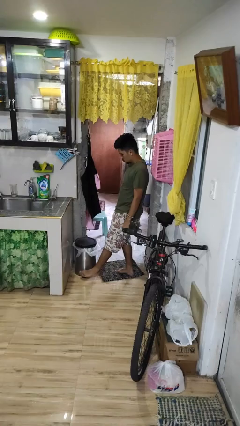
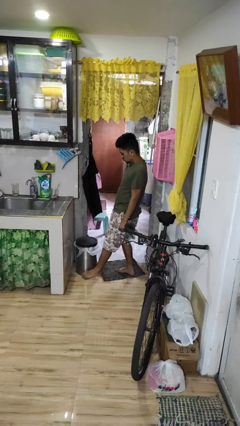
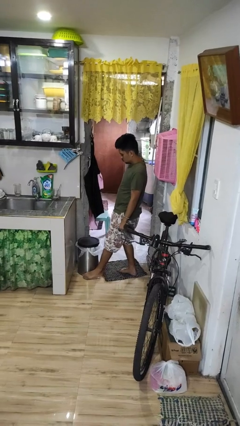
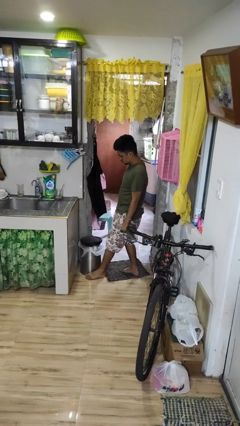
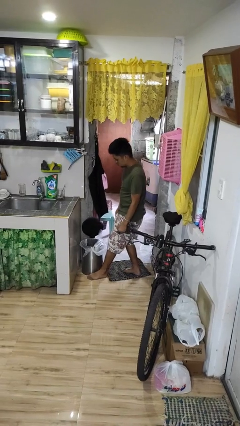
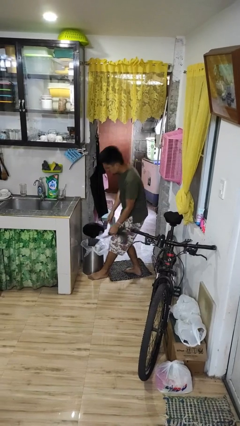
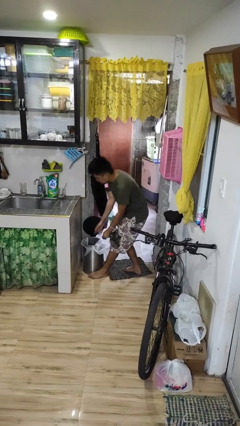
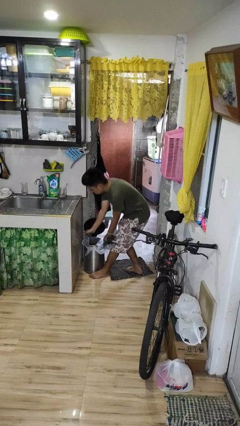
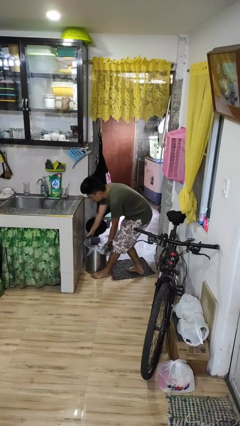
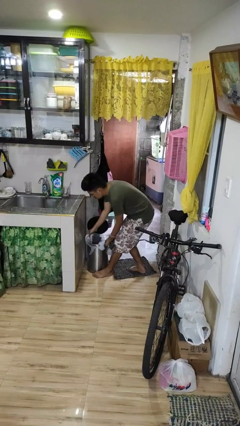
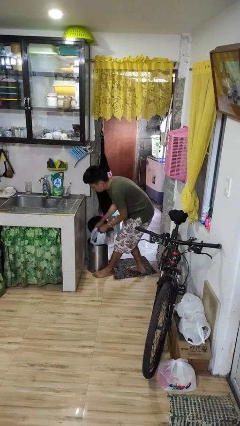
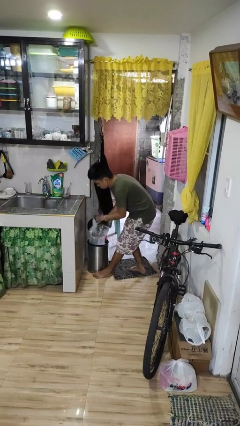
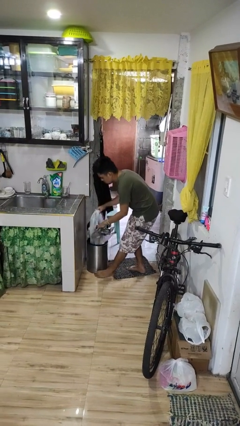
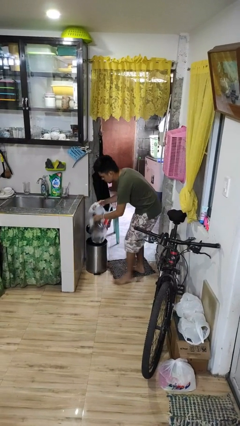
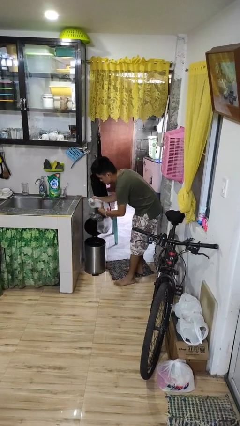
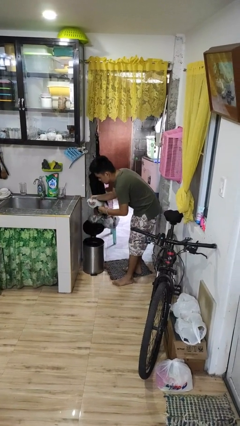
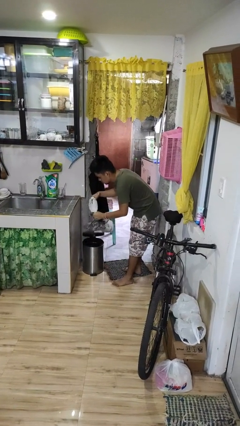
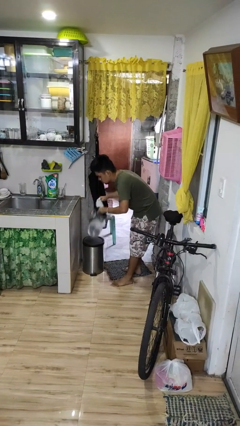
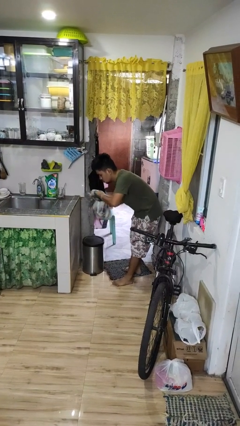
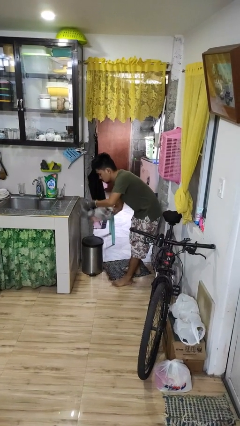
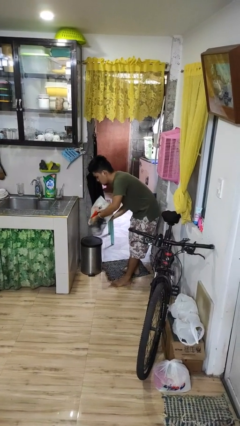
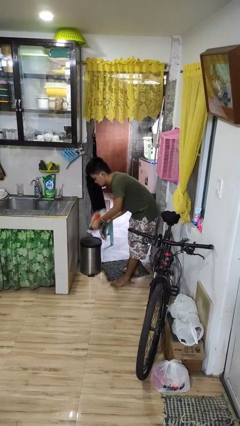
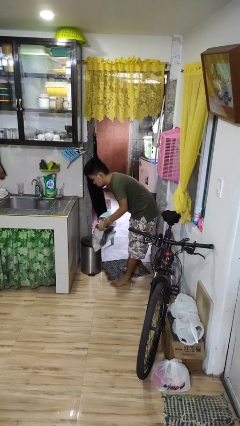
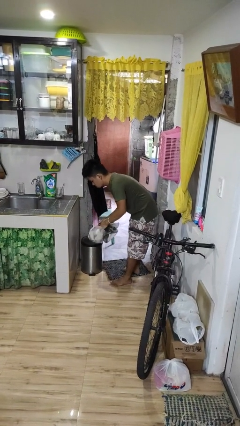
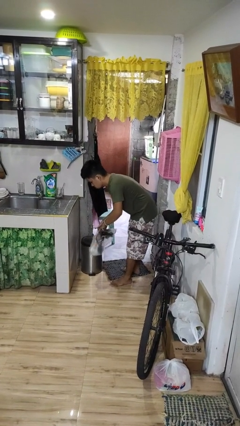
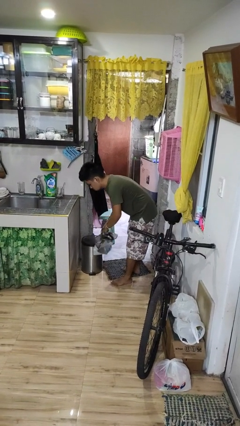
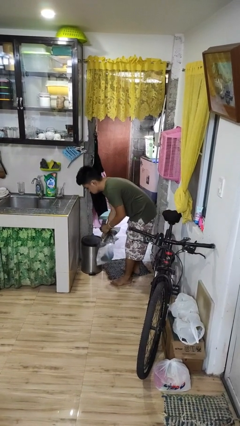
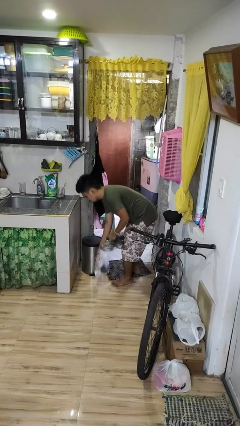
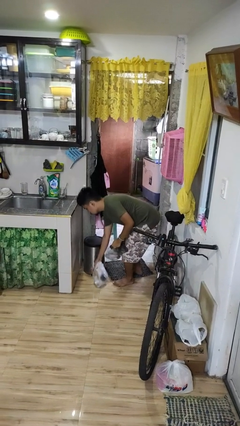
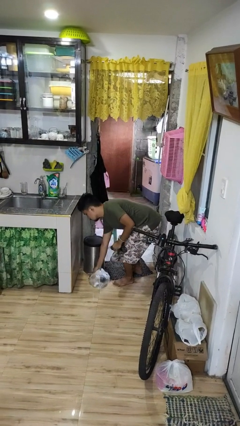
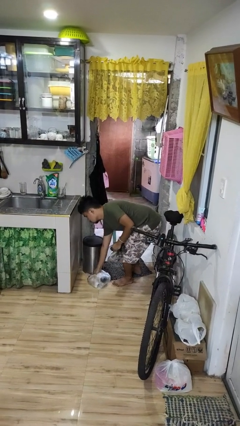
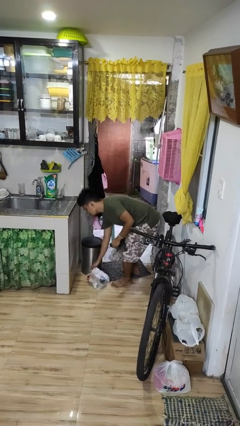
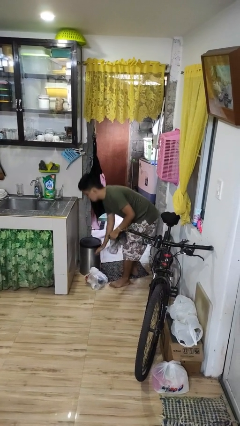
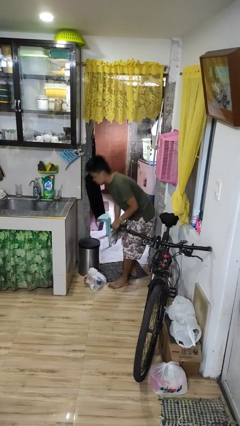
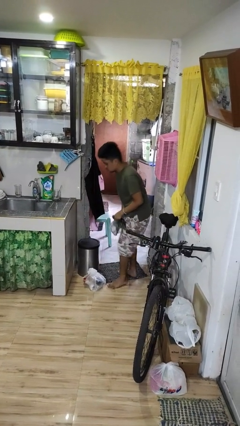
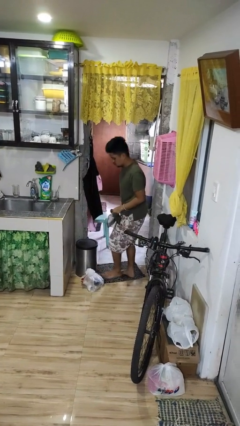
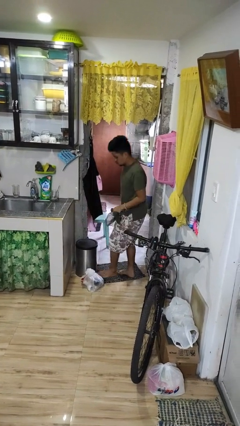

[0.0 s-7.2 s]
person removes trashbag from trashcan

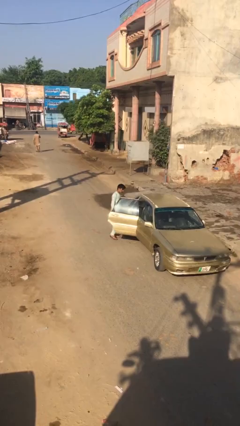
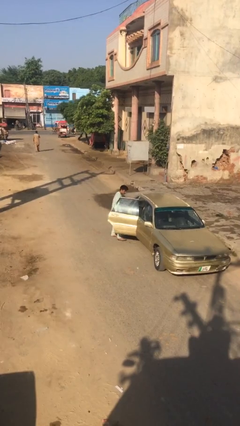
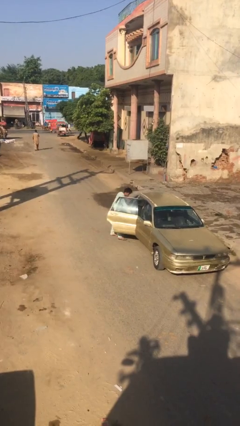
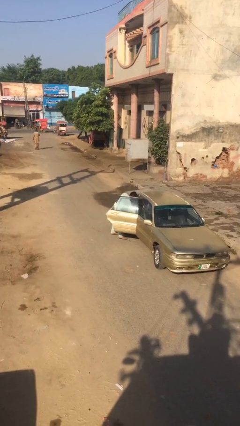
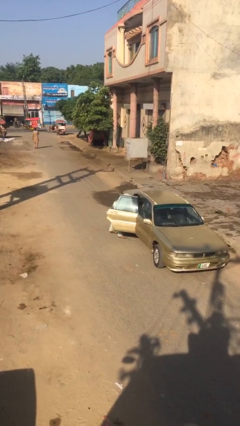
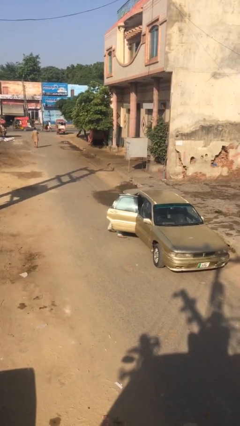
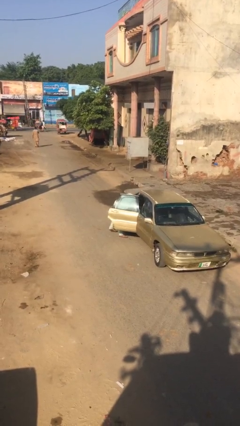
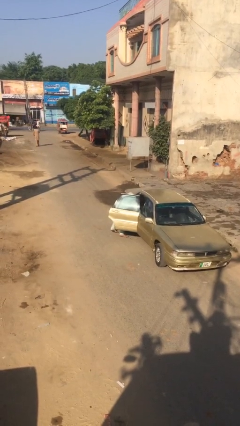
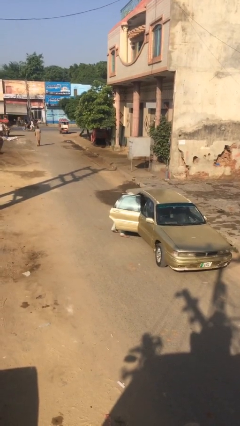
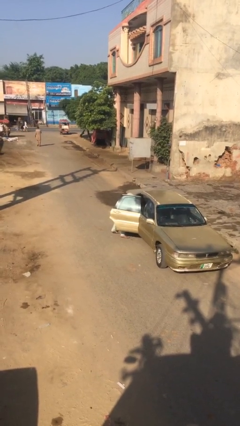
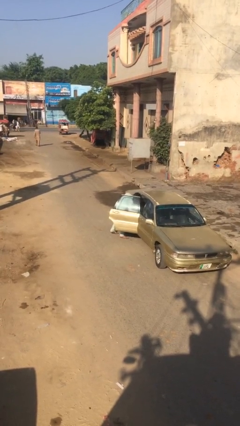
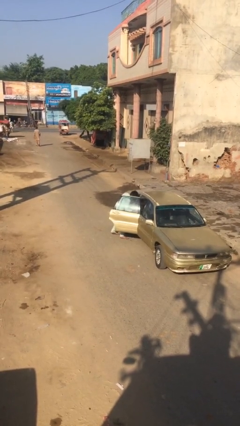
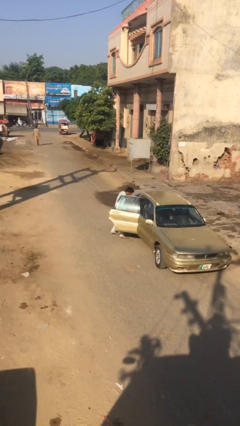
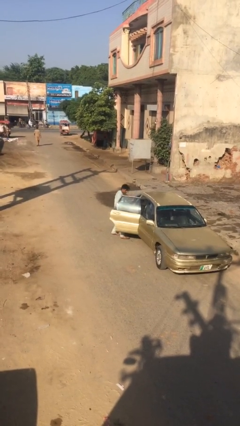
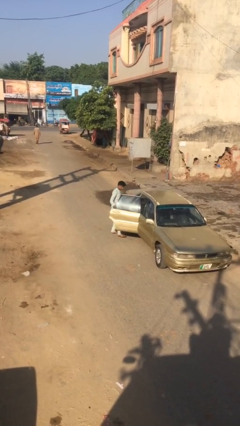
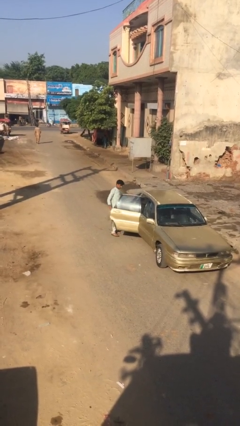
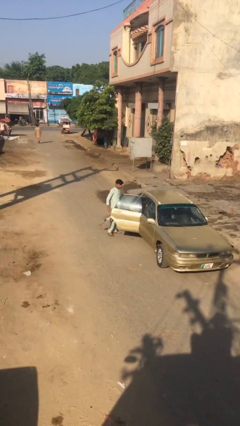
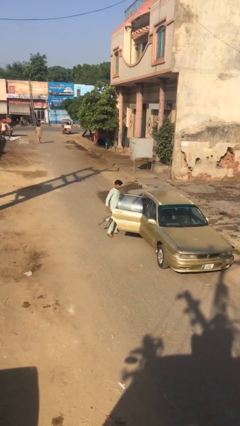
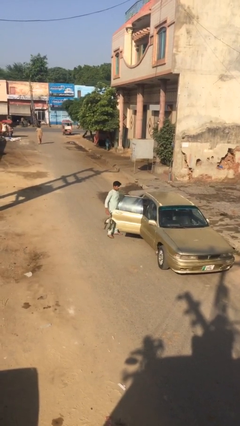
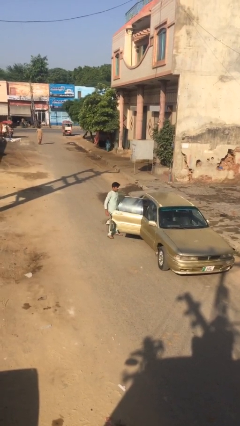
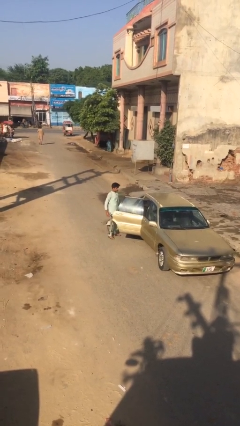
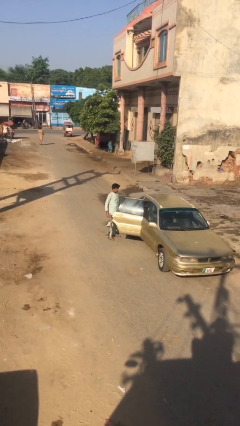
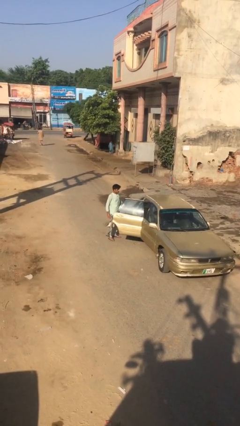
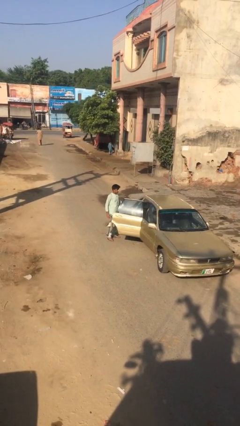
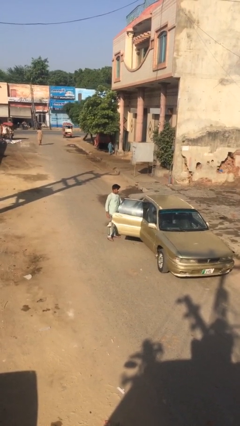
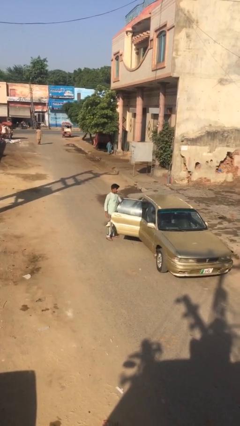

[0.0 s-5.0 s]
person unloads car

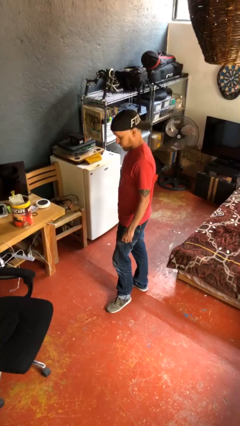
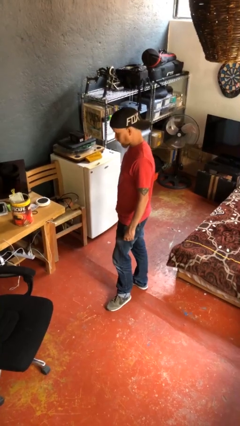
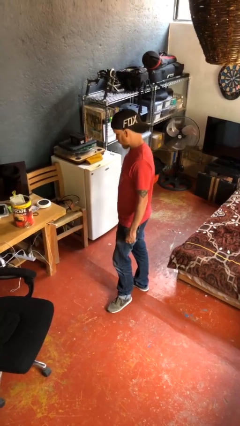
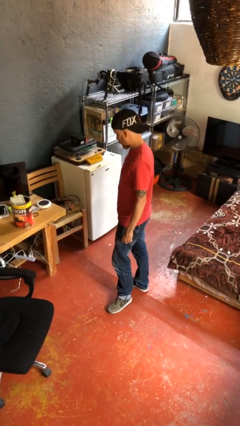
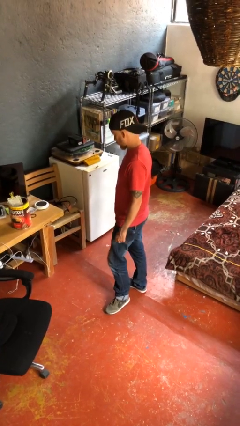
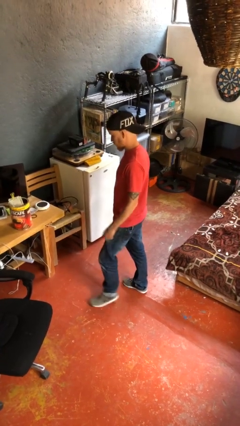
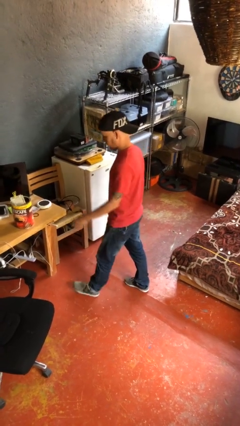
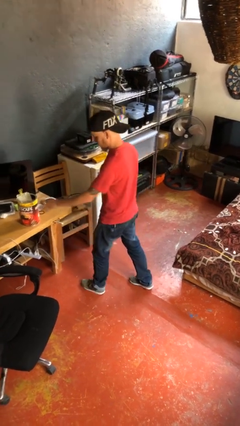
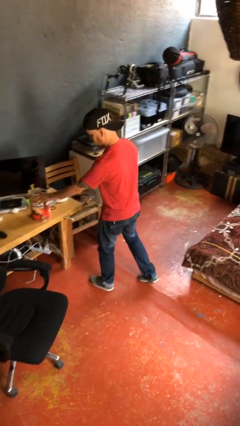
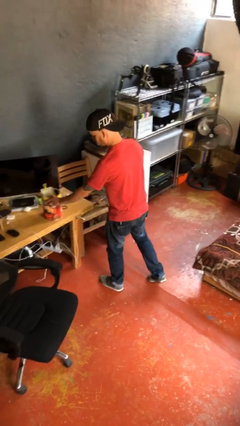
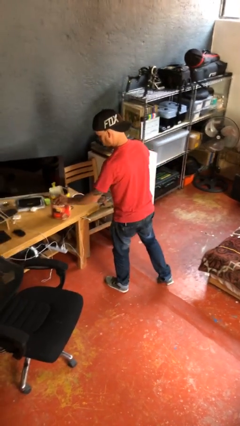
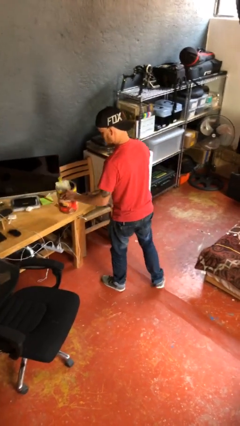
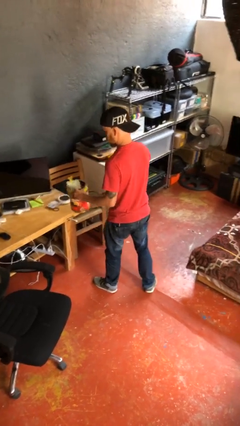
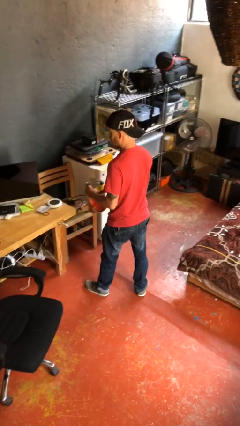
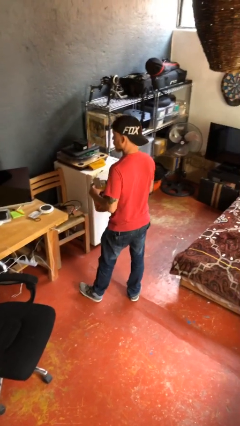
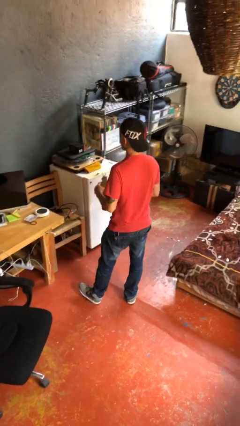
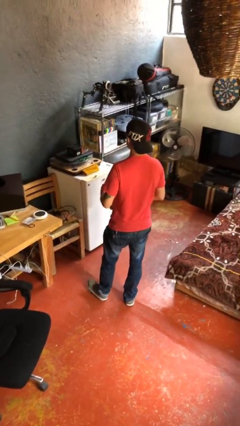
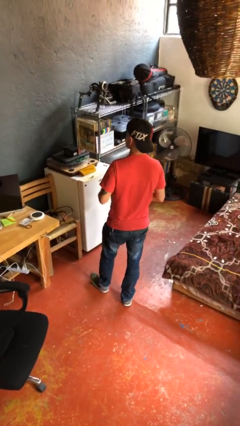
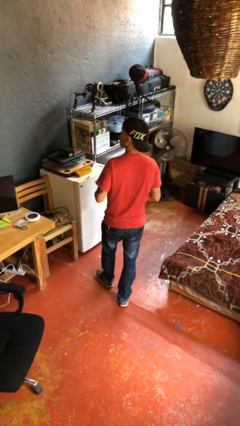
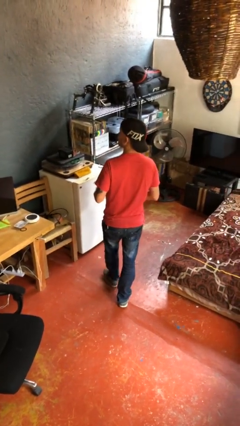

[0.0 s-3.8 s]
person picks up object from table

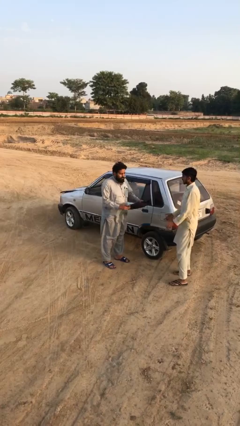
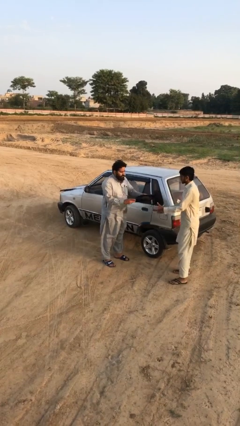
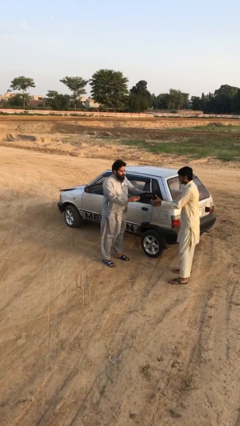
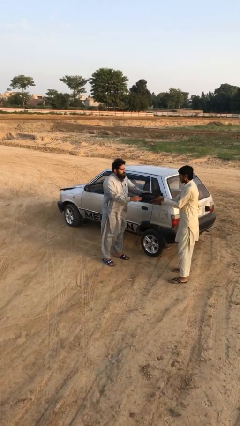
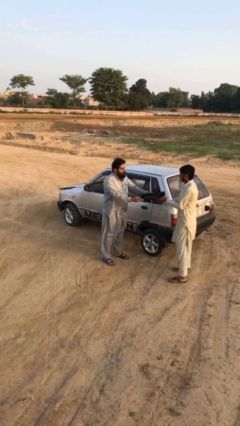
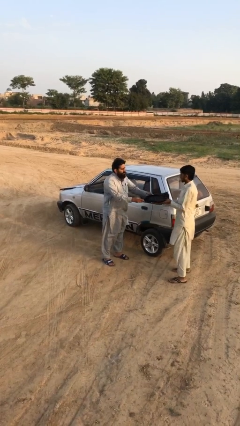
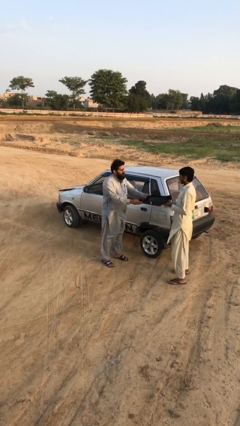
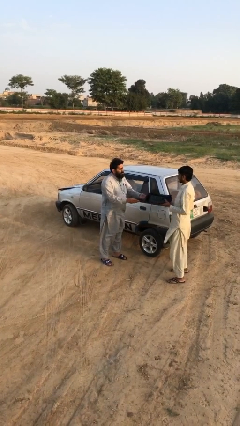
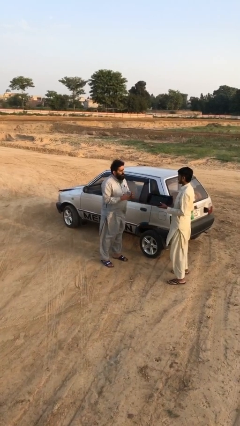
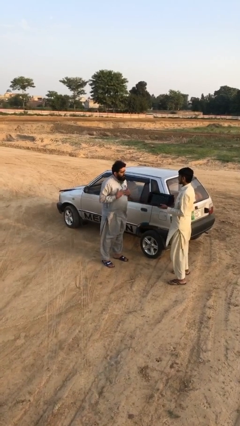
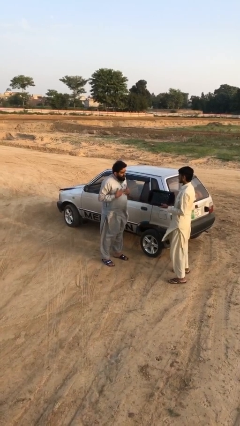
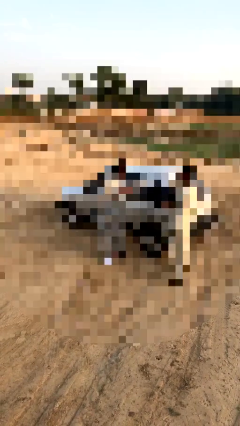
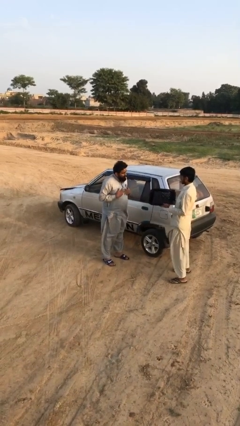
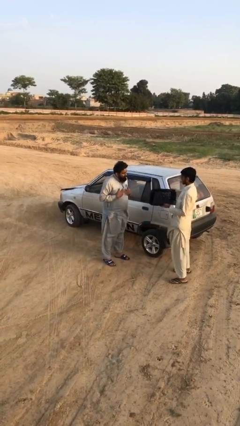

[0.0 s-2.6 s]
person transfers object to person
